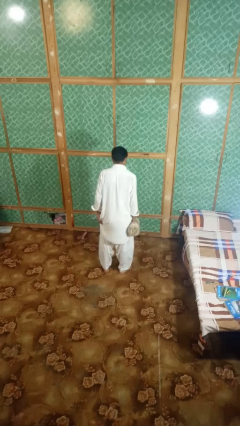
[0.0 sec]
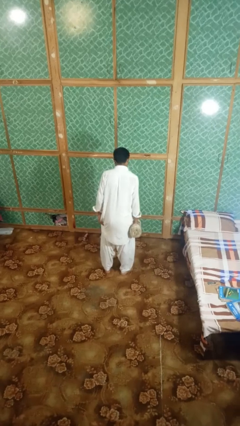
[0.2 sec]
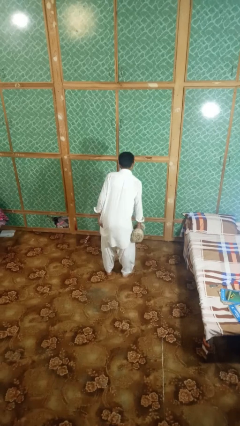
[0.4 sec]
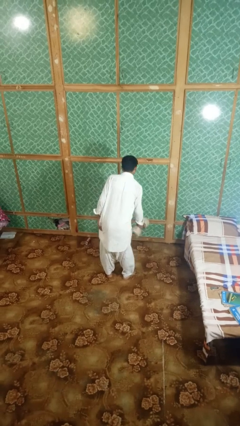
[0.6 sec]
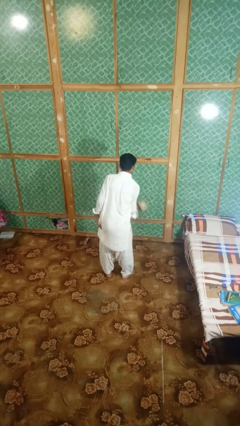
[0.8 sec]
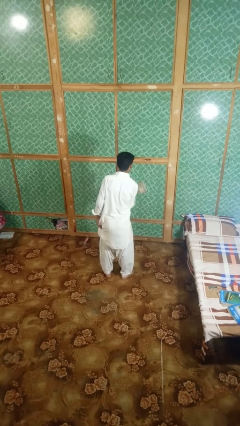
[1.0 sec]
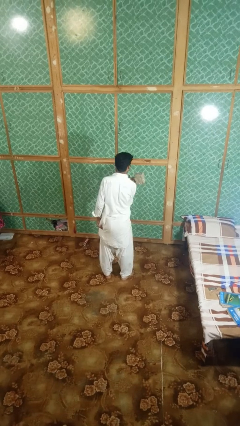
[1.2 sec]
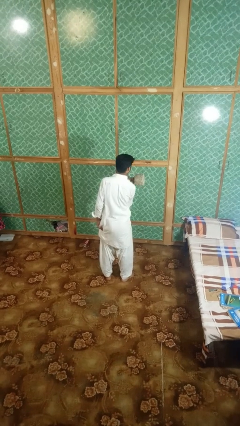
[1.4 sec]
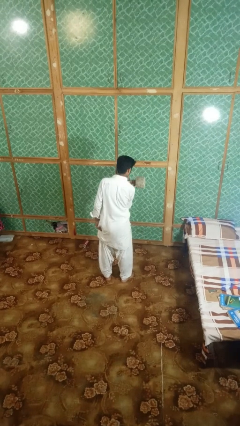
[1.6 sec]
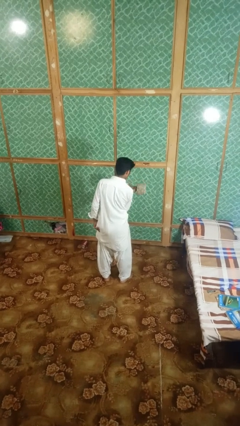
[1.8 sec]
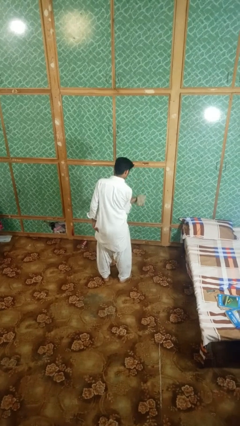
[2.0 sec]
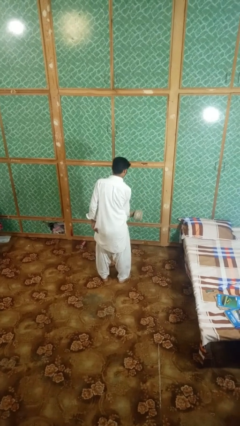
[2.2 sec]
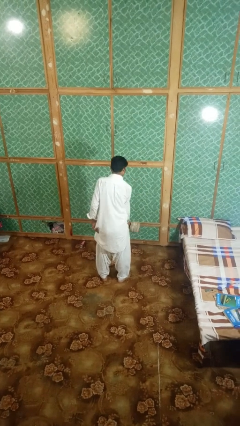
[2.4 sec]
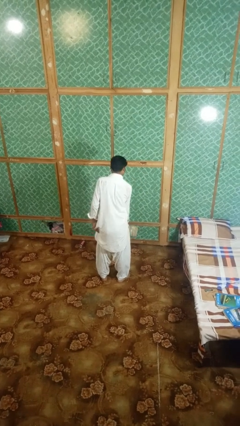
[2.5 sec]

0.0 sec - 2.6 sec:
person lifts dumbbells

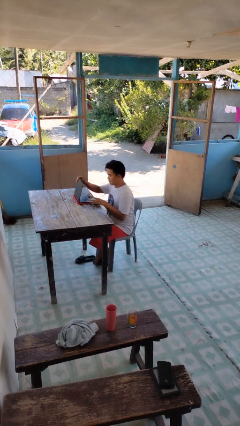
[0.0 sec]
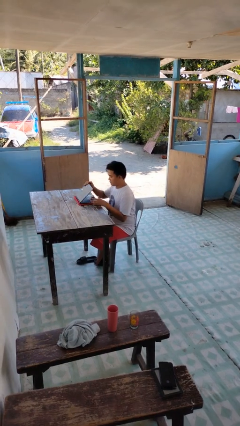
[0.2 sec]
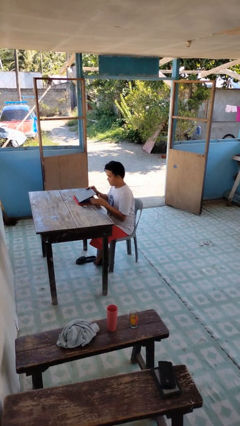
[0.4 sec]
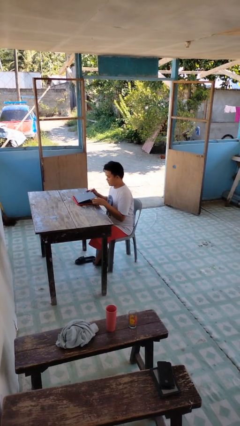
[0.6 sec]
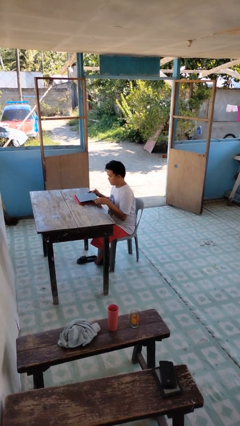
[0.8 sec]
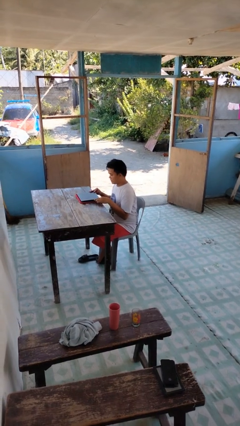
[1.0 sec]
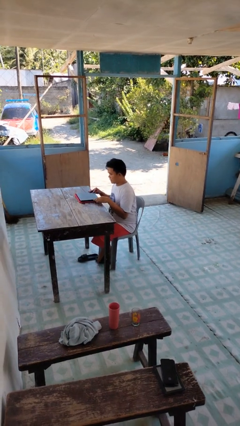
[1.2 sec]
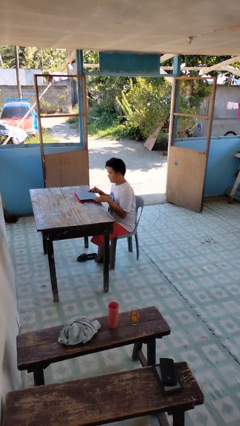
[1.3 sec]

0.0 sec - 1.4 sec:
person closes laptop

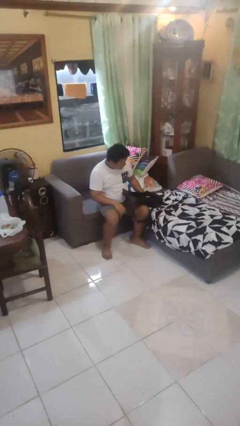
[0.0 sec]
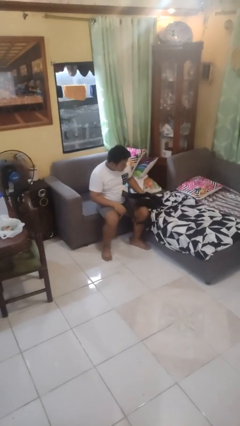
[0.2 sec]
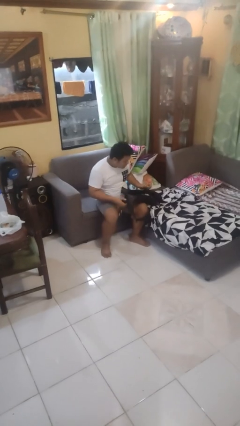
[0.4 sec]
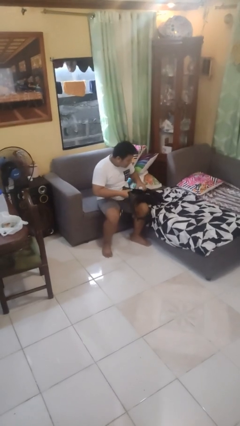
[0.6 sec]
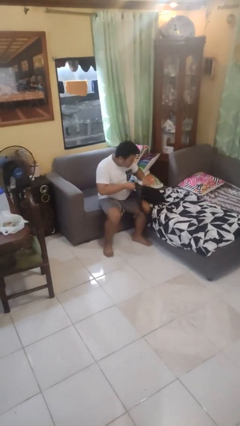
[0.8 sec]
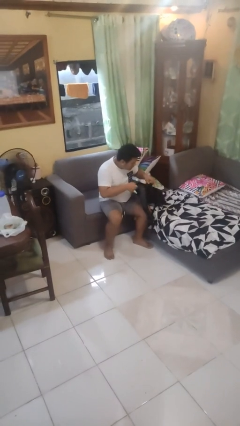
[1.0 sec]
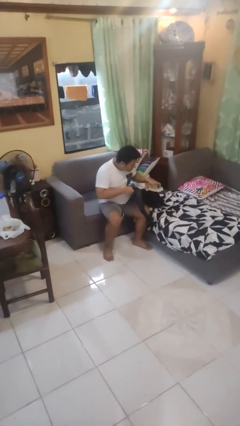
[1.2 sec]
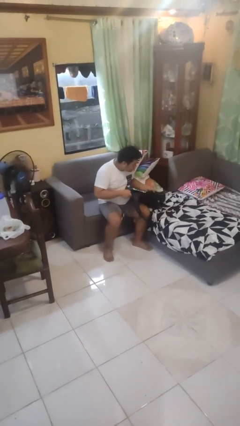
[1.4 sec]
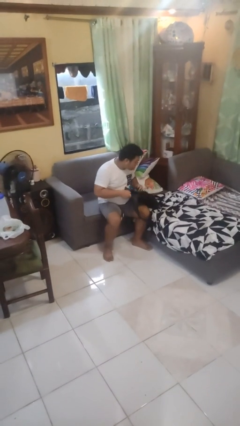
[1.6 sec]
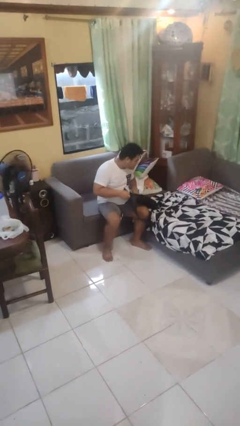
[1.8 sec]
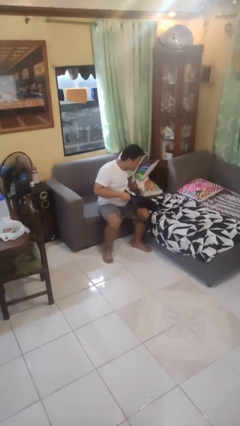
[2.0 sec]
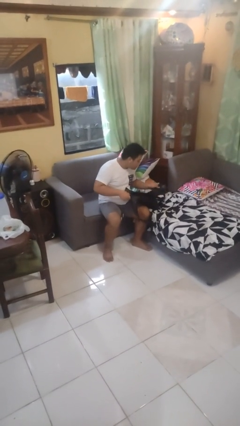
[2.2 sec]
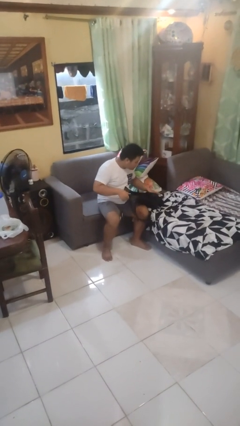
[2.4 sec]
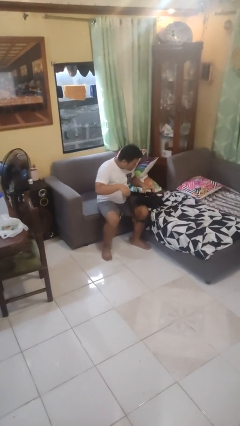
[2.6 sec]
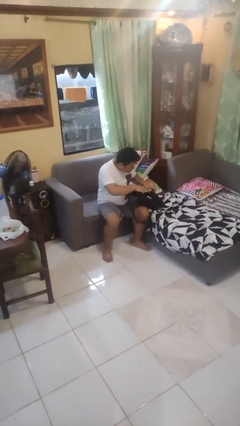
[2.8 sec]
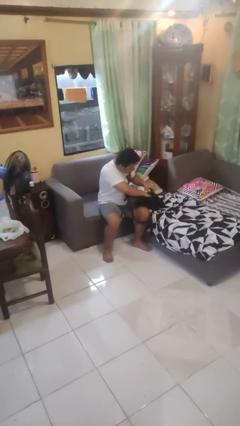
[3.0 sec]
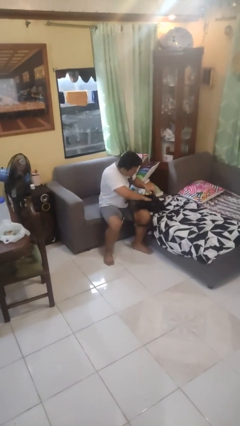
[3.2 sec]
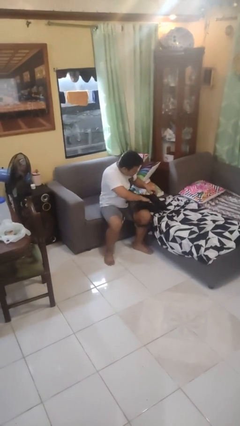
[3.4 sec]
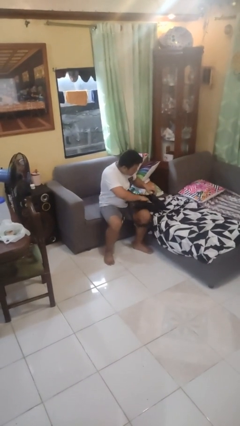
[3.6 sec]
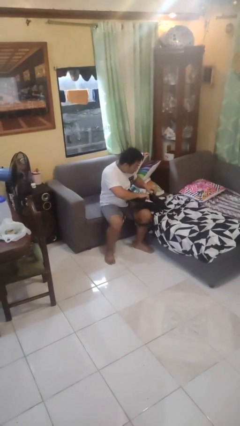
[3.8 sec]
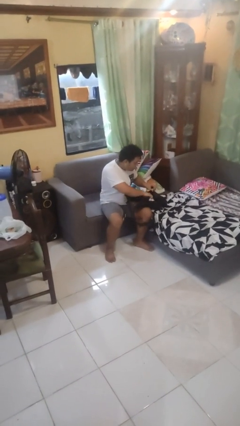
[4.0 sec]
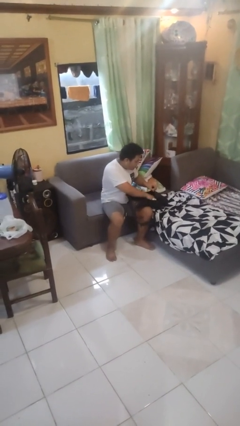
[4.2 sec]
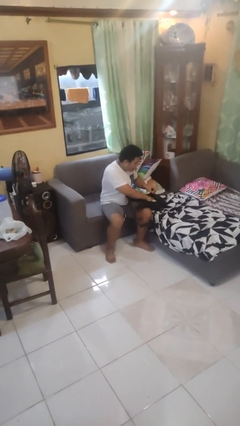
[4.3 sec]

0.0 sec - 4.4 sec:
person searches in backpack

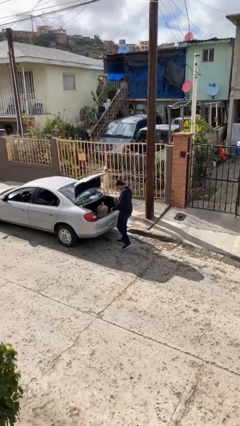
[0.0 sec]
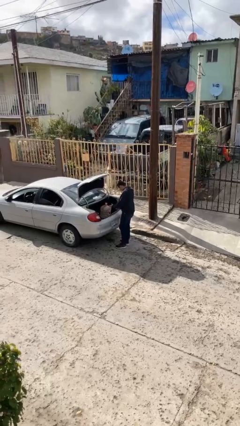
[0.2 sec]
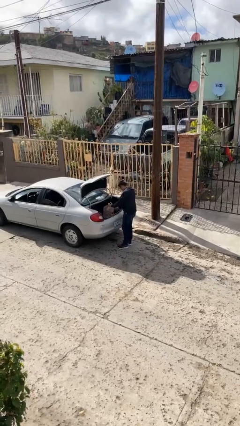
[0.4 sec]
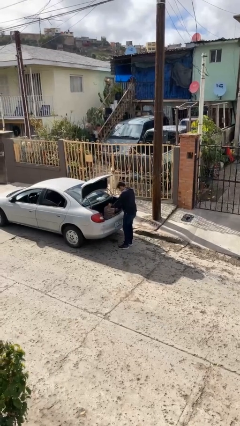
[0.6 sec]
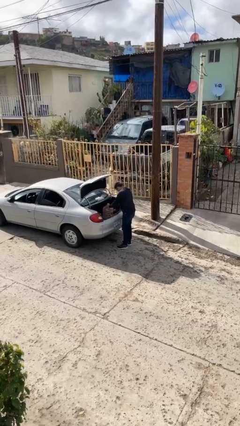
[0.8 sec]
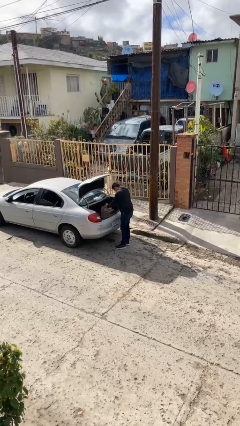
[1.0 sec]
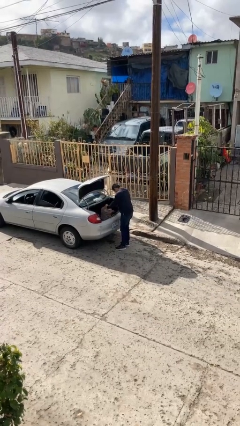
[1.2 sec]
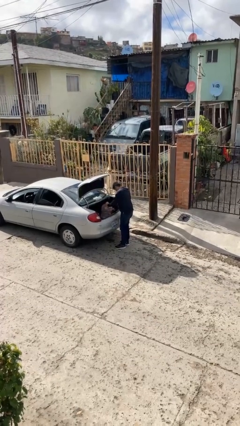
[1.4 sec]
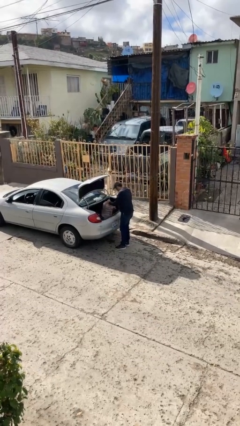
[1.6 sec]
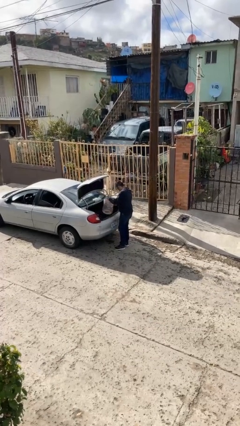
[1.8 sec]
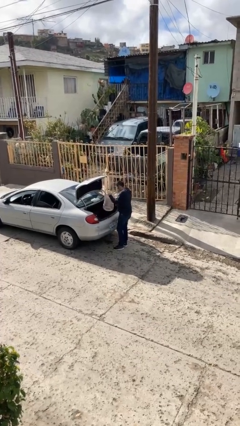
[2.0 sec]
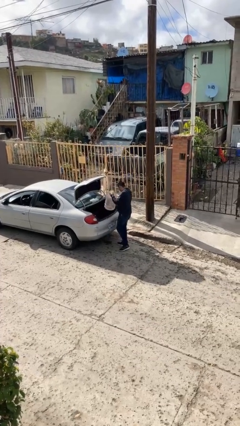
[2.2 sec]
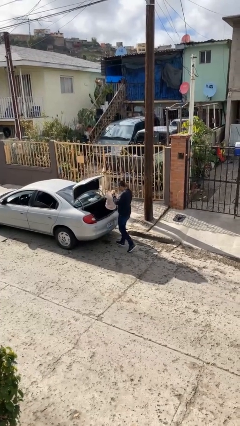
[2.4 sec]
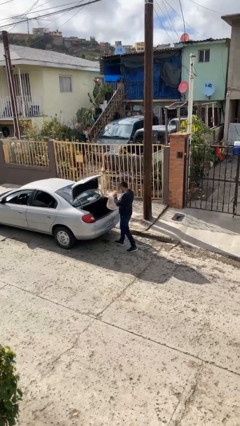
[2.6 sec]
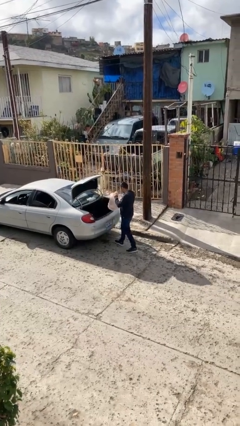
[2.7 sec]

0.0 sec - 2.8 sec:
person unloads car

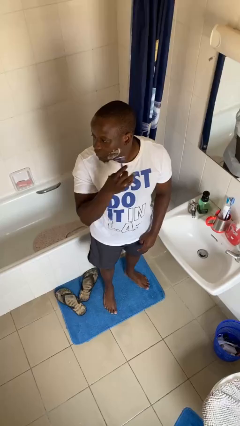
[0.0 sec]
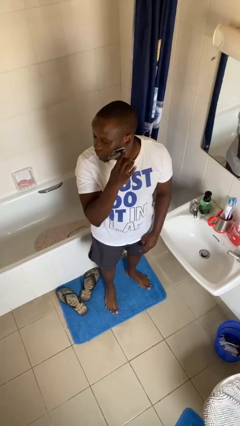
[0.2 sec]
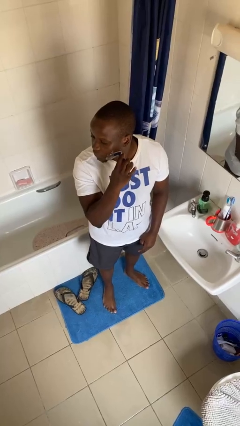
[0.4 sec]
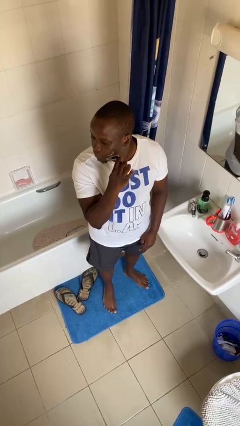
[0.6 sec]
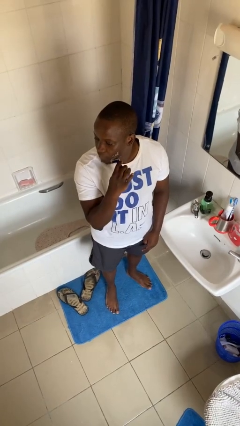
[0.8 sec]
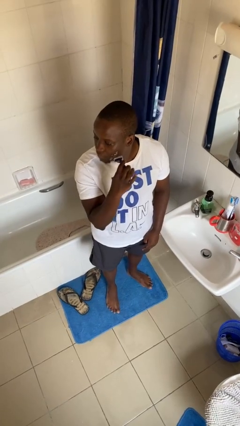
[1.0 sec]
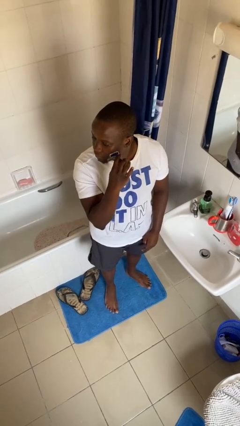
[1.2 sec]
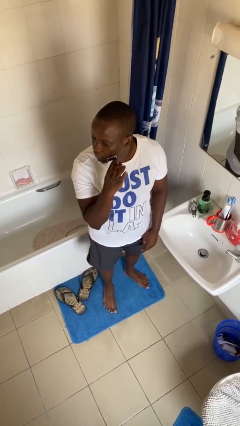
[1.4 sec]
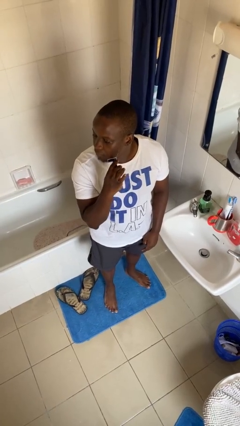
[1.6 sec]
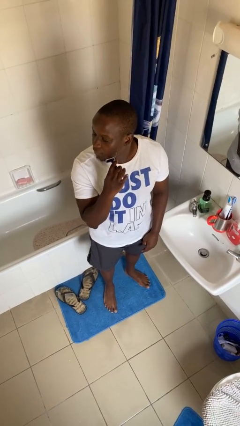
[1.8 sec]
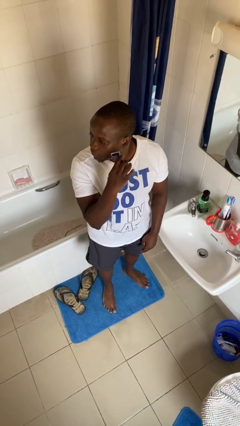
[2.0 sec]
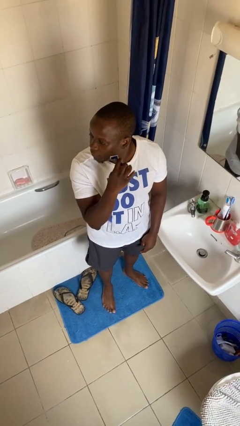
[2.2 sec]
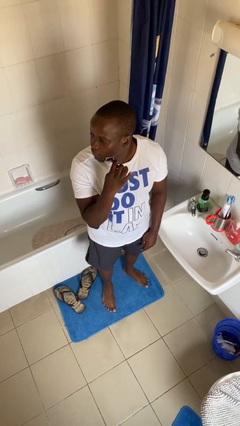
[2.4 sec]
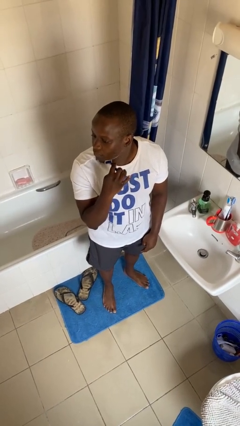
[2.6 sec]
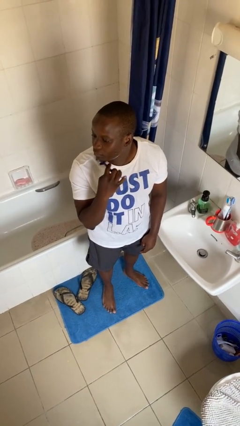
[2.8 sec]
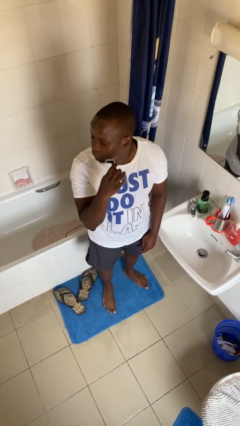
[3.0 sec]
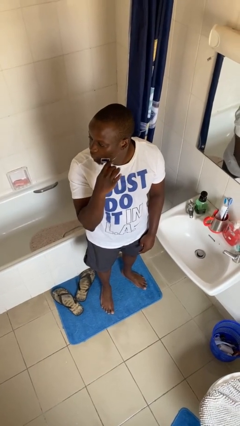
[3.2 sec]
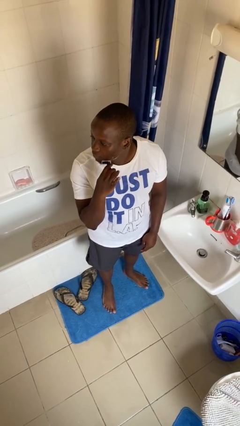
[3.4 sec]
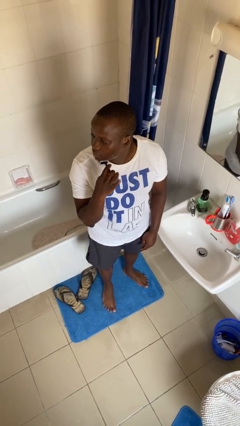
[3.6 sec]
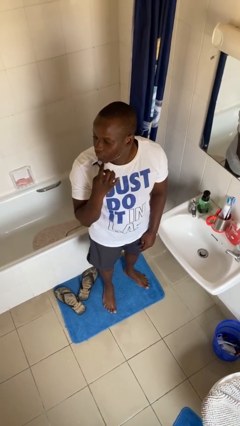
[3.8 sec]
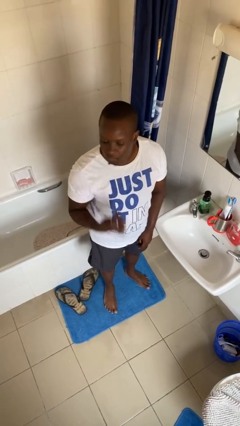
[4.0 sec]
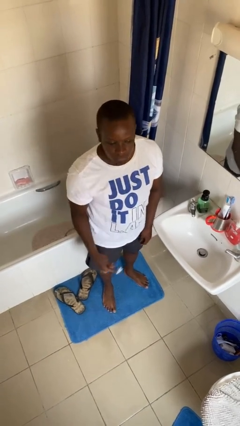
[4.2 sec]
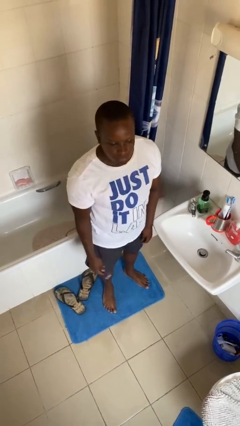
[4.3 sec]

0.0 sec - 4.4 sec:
person shaves face

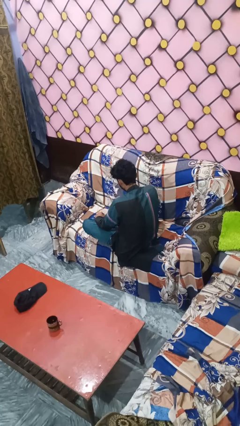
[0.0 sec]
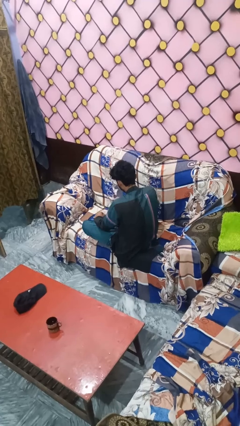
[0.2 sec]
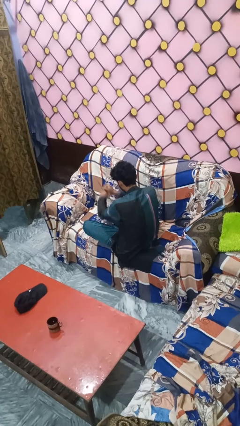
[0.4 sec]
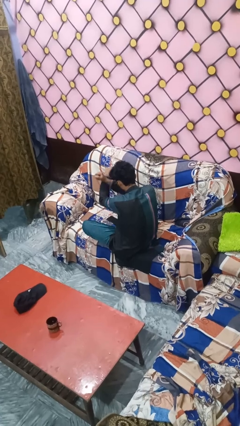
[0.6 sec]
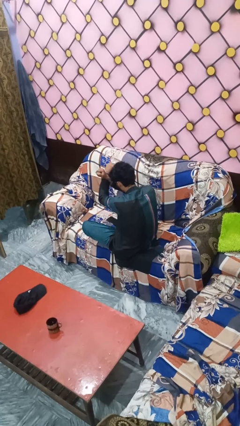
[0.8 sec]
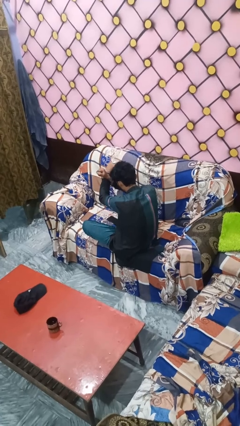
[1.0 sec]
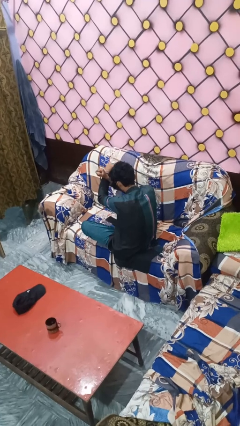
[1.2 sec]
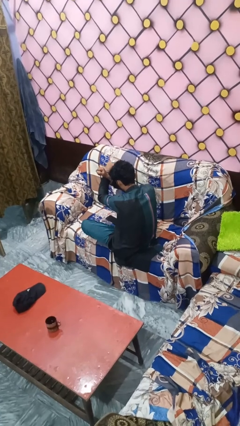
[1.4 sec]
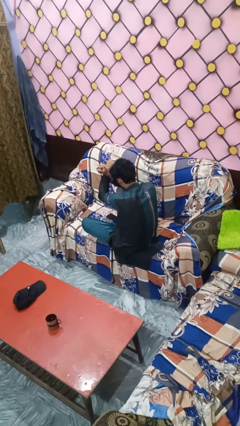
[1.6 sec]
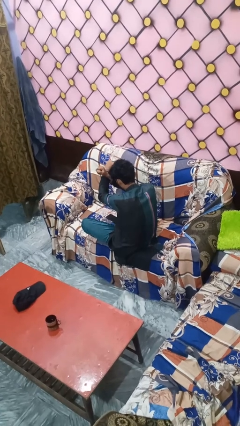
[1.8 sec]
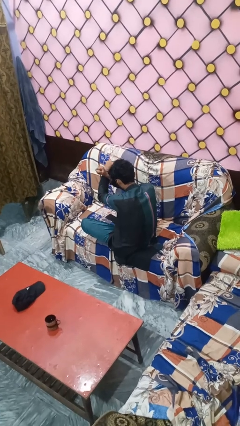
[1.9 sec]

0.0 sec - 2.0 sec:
person gestures arms x
